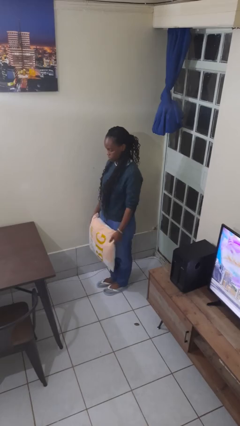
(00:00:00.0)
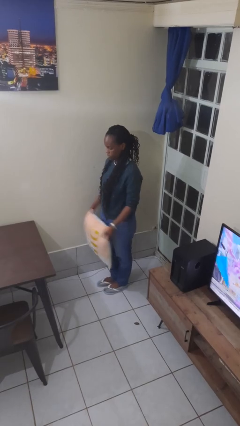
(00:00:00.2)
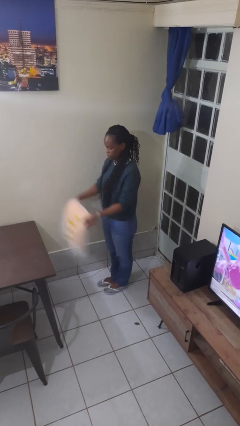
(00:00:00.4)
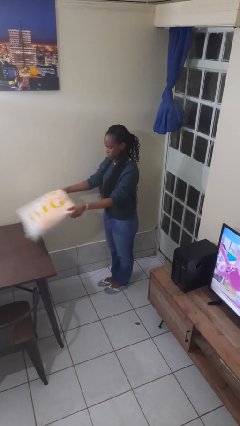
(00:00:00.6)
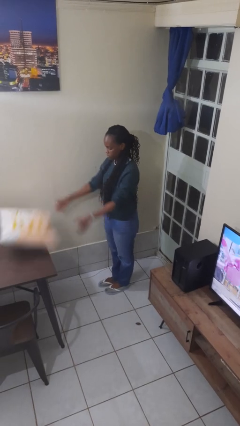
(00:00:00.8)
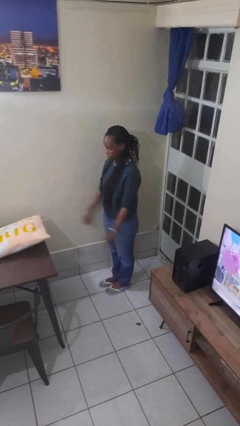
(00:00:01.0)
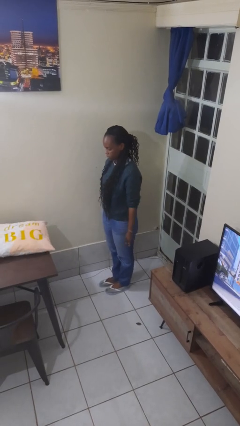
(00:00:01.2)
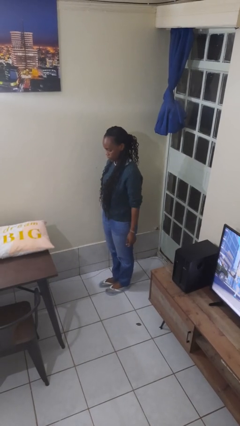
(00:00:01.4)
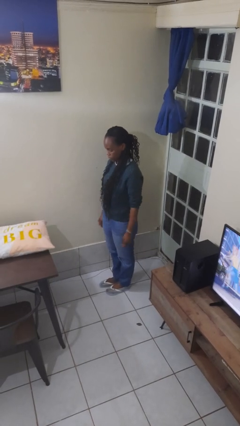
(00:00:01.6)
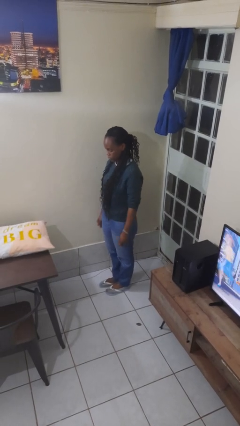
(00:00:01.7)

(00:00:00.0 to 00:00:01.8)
person throws object on table

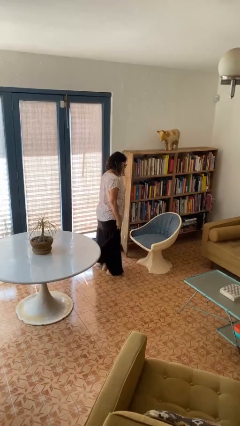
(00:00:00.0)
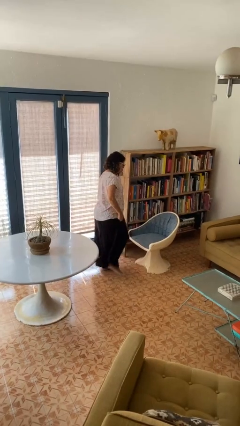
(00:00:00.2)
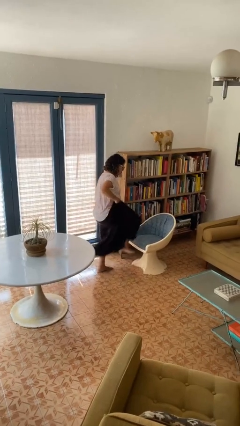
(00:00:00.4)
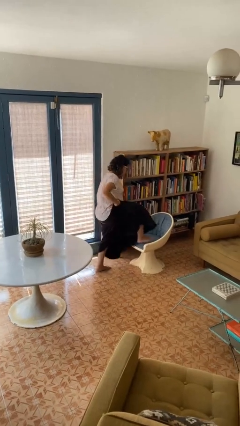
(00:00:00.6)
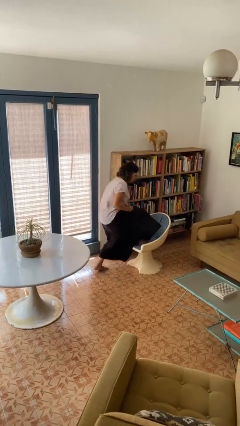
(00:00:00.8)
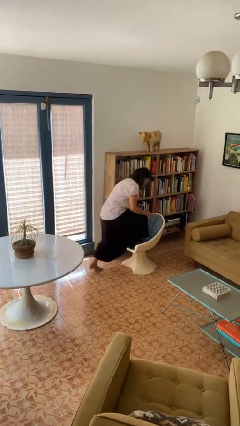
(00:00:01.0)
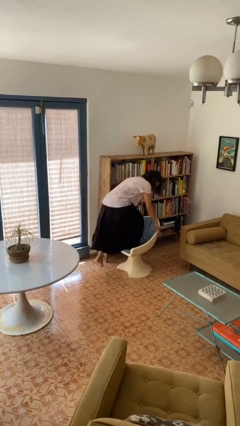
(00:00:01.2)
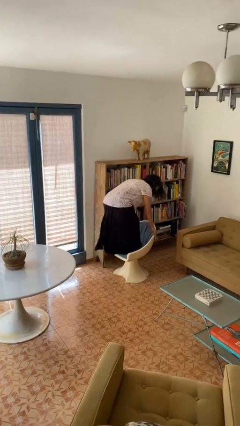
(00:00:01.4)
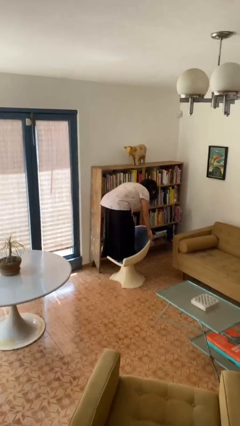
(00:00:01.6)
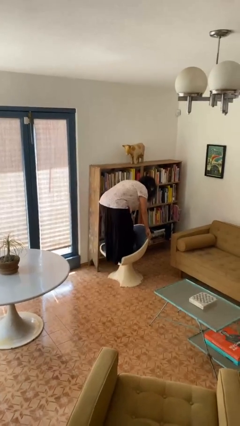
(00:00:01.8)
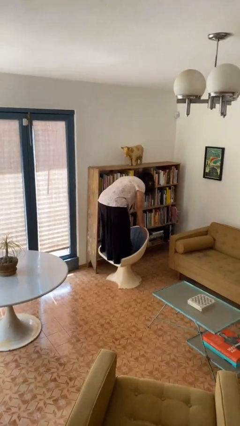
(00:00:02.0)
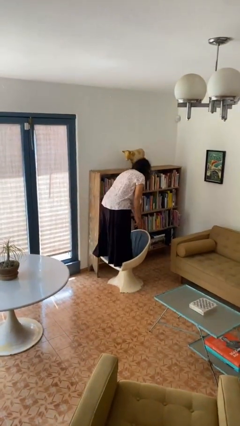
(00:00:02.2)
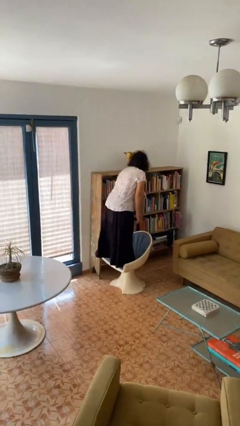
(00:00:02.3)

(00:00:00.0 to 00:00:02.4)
person climbs on chair

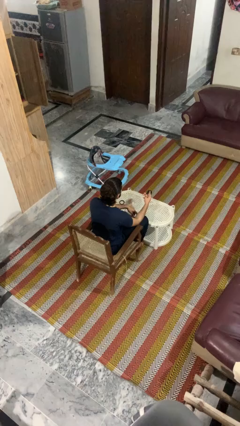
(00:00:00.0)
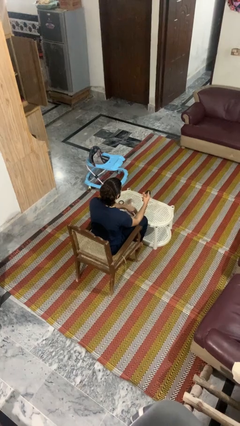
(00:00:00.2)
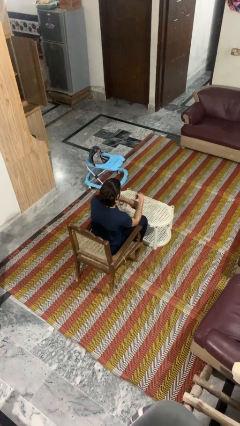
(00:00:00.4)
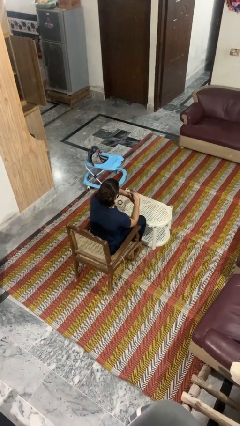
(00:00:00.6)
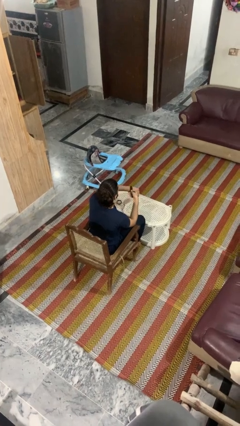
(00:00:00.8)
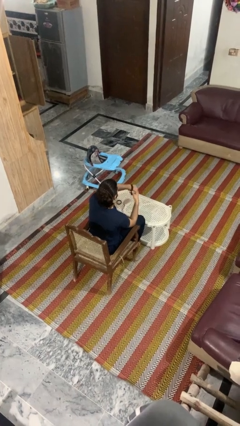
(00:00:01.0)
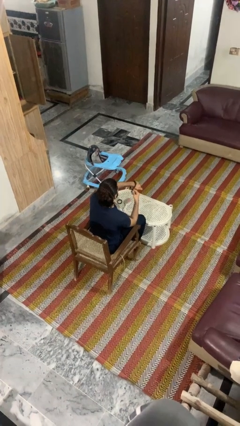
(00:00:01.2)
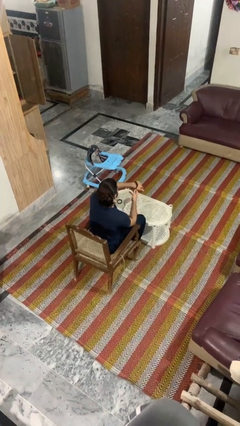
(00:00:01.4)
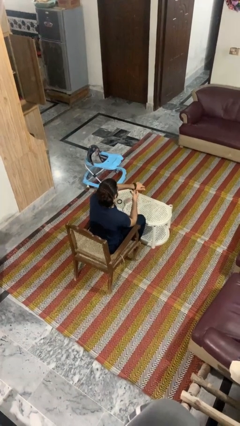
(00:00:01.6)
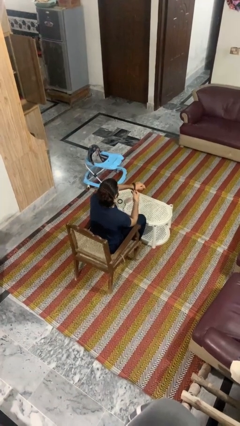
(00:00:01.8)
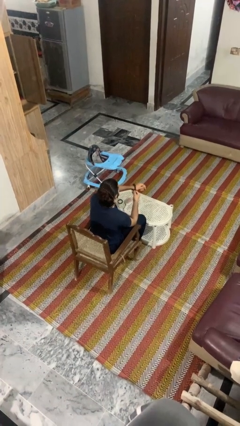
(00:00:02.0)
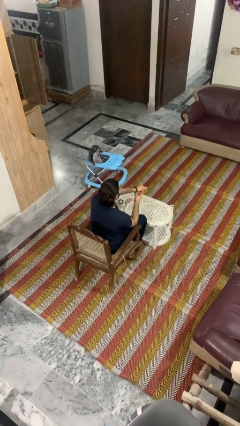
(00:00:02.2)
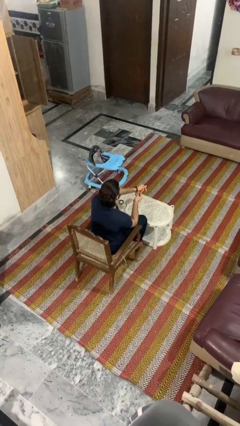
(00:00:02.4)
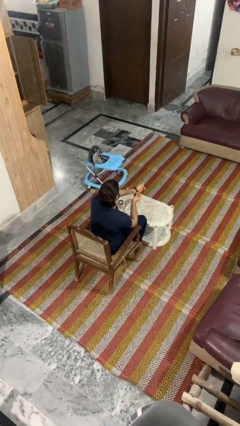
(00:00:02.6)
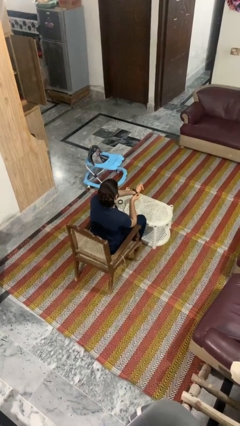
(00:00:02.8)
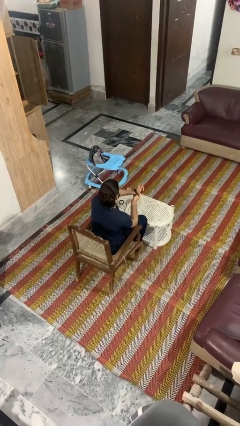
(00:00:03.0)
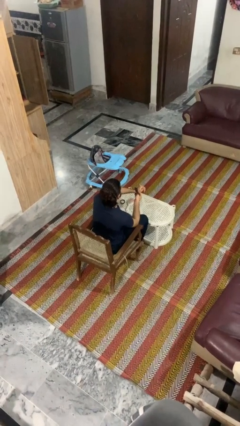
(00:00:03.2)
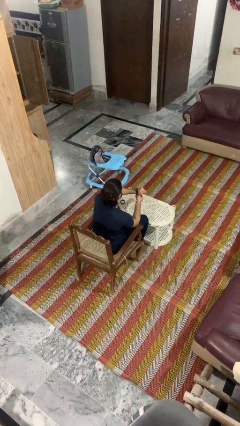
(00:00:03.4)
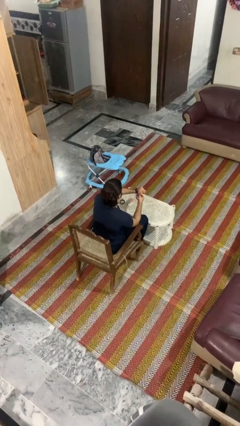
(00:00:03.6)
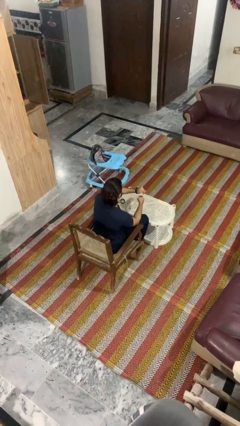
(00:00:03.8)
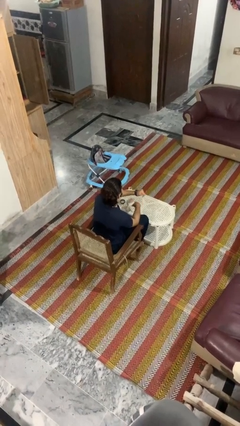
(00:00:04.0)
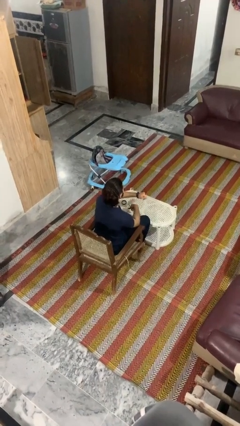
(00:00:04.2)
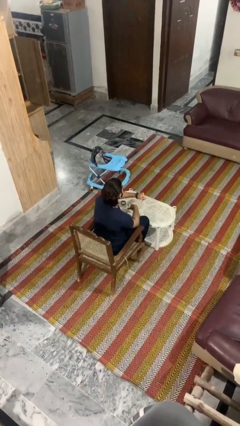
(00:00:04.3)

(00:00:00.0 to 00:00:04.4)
person puts on wristwatch

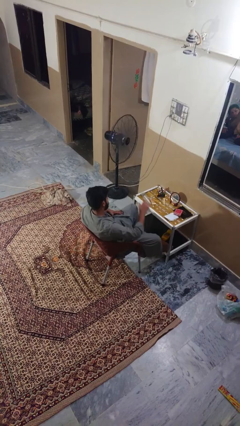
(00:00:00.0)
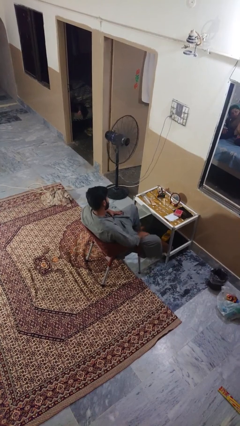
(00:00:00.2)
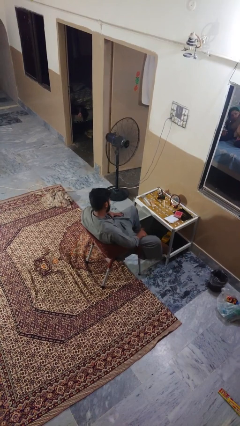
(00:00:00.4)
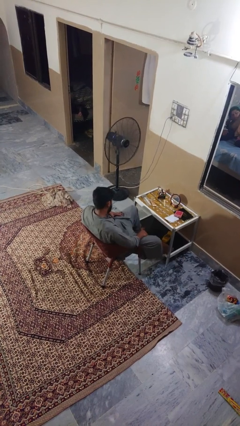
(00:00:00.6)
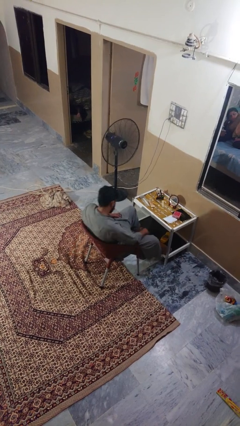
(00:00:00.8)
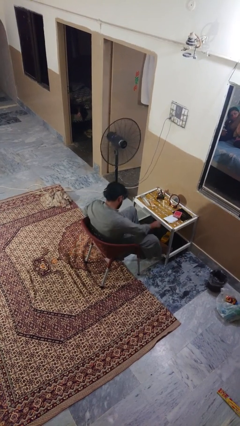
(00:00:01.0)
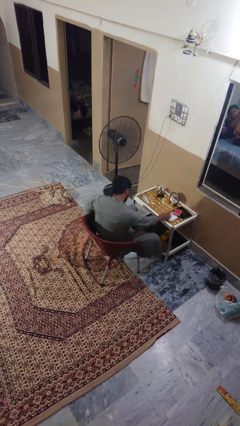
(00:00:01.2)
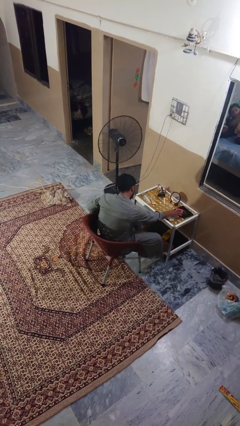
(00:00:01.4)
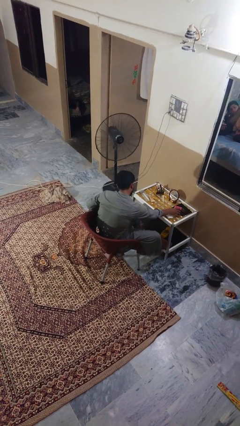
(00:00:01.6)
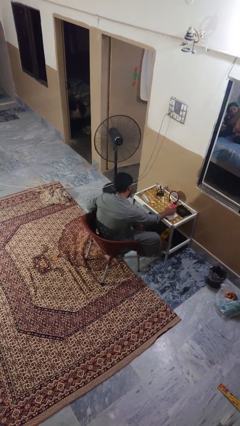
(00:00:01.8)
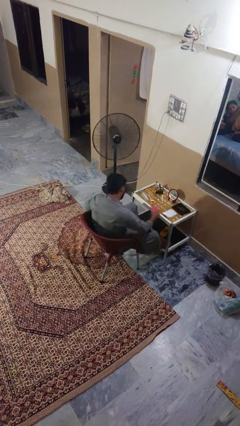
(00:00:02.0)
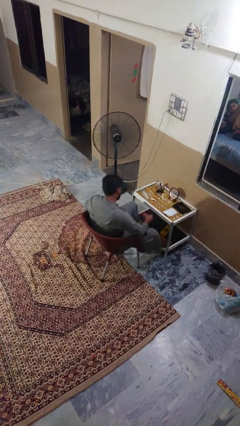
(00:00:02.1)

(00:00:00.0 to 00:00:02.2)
person picks up object from table

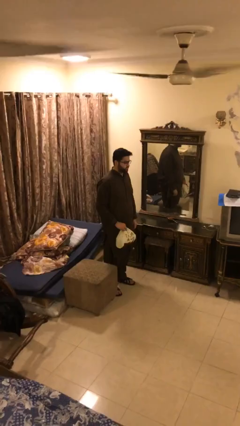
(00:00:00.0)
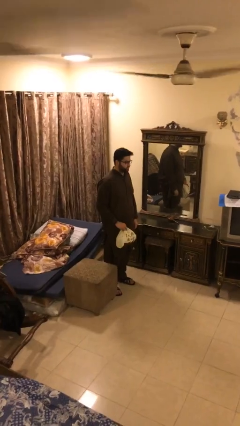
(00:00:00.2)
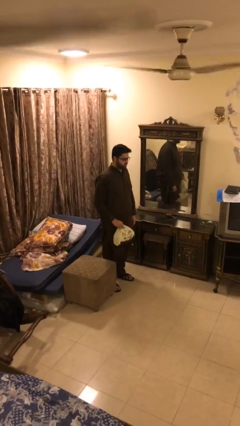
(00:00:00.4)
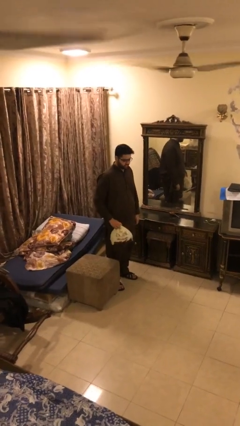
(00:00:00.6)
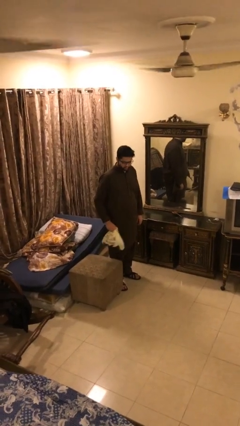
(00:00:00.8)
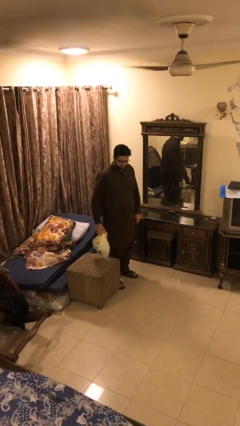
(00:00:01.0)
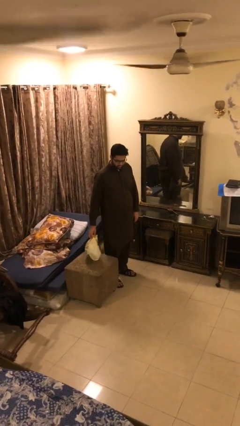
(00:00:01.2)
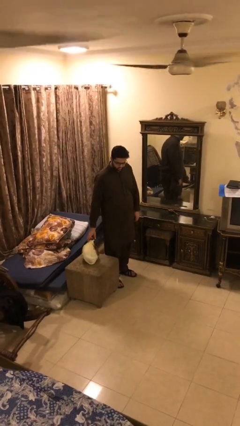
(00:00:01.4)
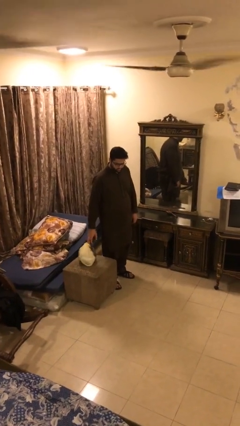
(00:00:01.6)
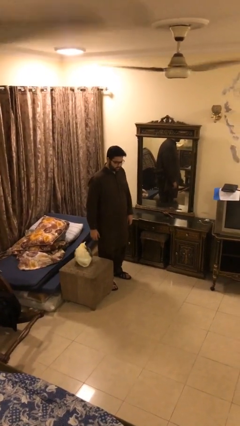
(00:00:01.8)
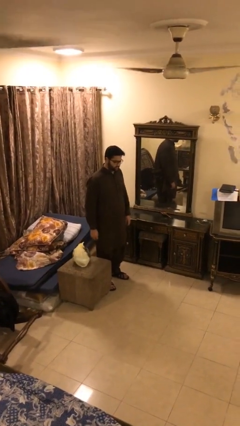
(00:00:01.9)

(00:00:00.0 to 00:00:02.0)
person puts down object on table

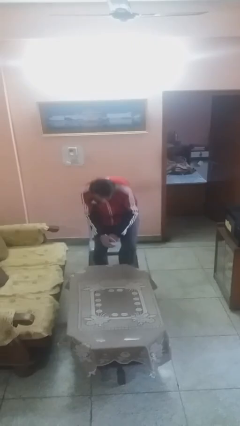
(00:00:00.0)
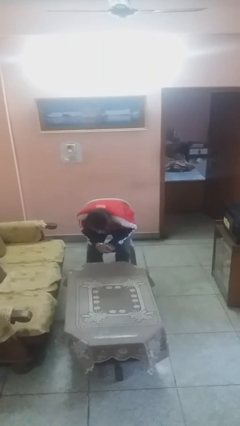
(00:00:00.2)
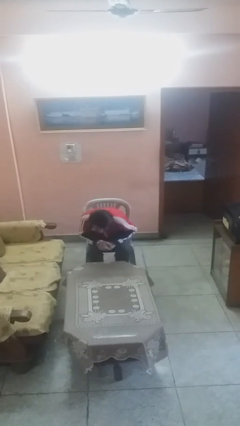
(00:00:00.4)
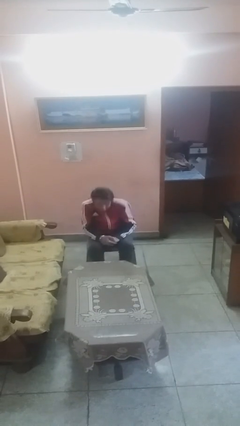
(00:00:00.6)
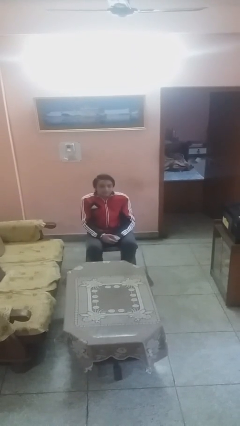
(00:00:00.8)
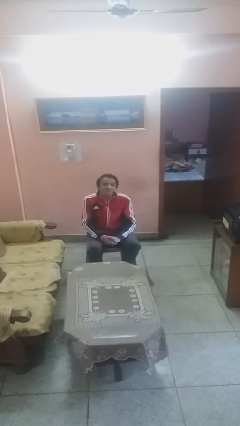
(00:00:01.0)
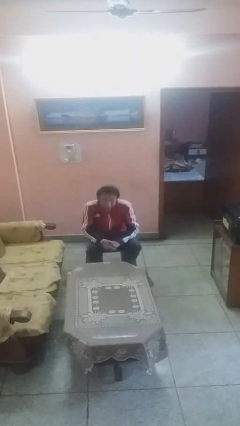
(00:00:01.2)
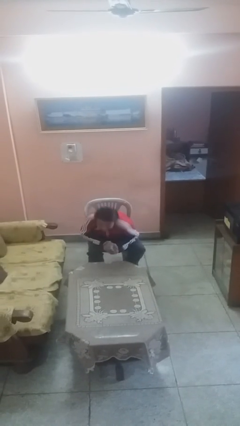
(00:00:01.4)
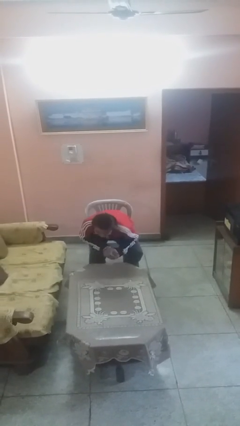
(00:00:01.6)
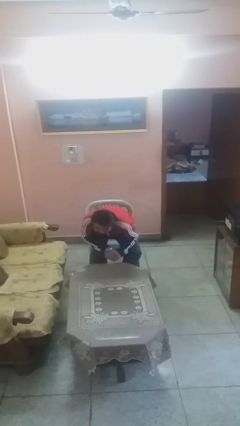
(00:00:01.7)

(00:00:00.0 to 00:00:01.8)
person sits down

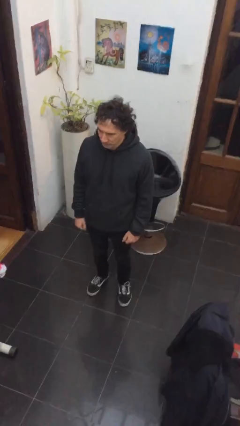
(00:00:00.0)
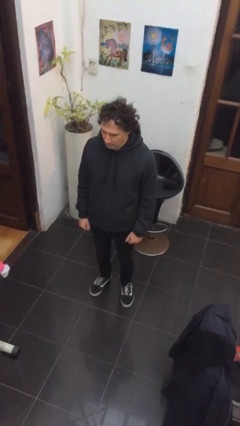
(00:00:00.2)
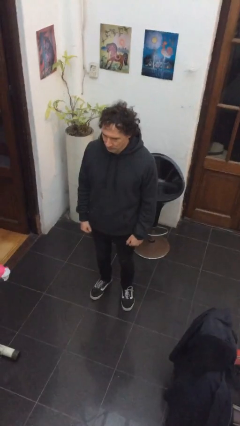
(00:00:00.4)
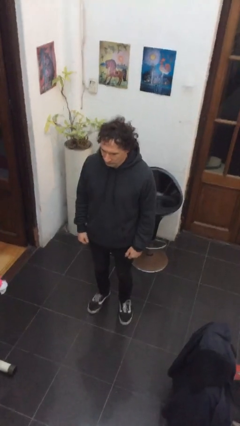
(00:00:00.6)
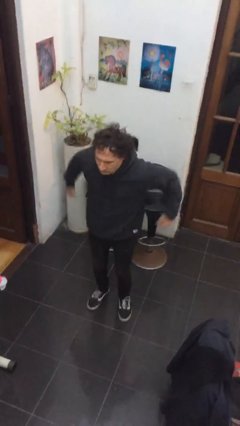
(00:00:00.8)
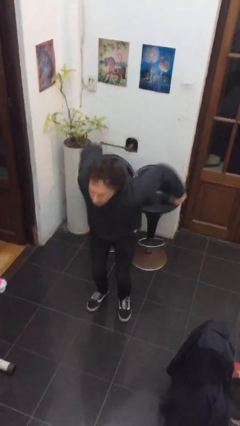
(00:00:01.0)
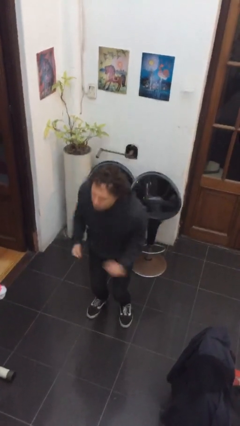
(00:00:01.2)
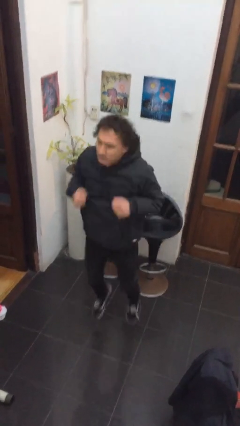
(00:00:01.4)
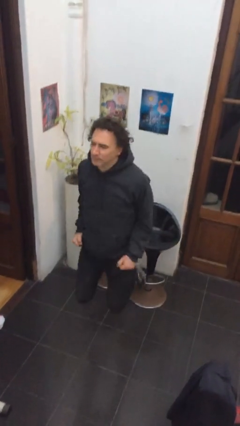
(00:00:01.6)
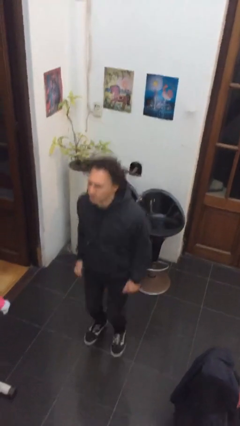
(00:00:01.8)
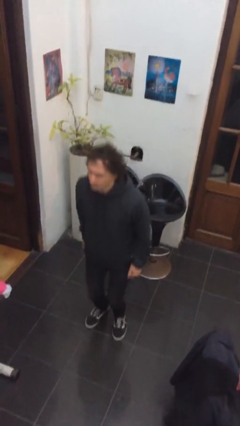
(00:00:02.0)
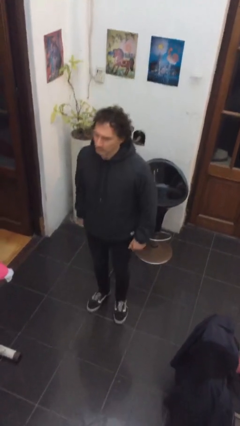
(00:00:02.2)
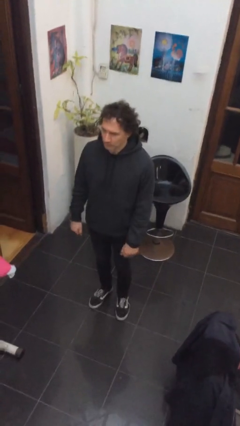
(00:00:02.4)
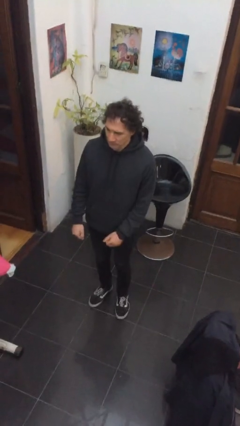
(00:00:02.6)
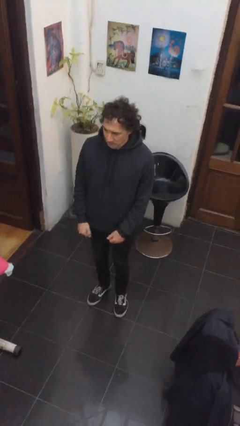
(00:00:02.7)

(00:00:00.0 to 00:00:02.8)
person jumps
